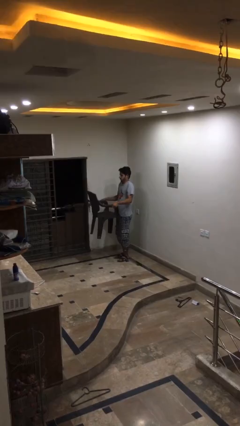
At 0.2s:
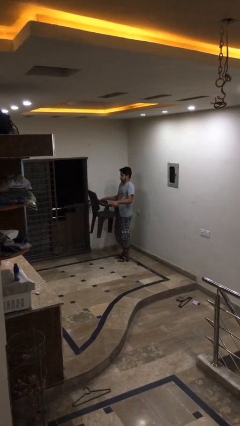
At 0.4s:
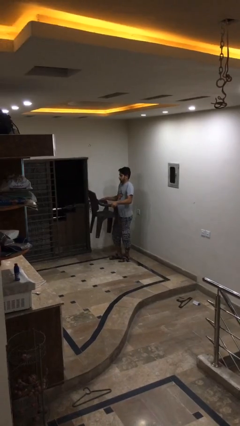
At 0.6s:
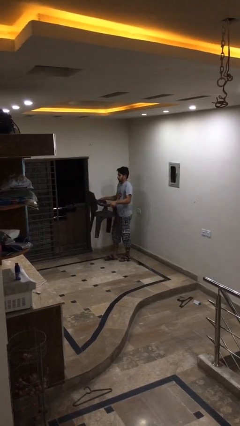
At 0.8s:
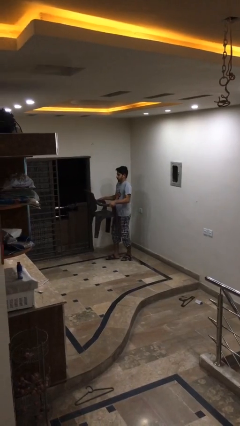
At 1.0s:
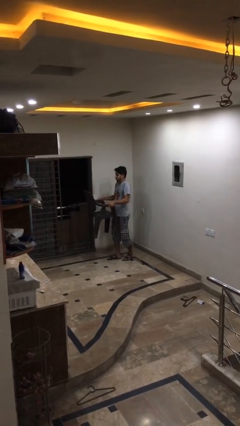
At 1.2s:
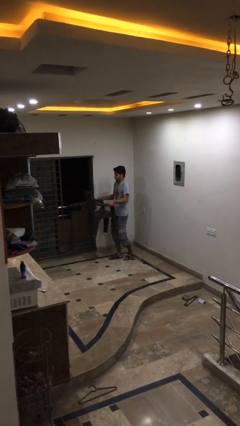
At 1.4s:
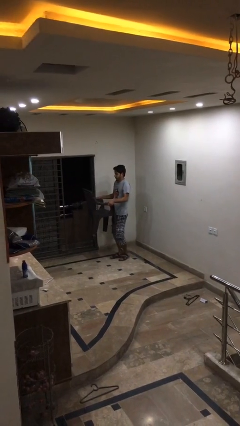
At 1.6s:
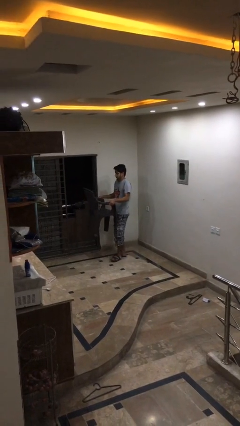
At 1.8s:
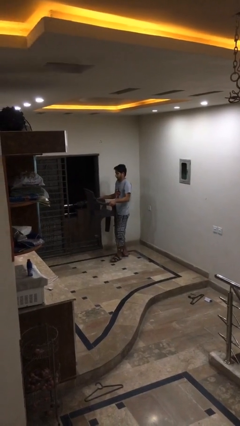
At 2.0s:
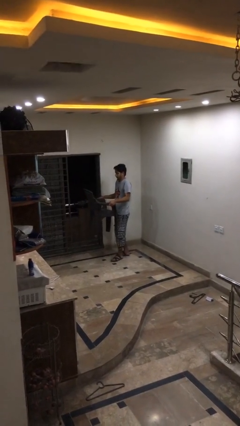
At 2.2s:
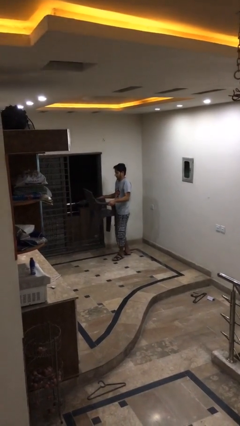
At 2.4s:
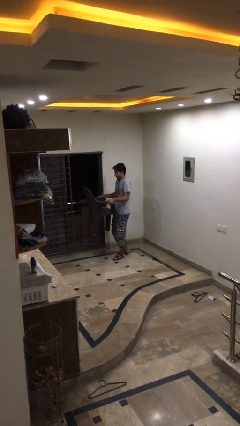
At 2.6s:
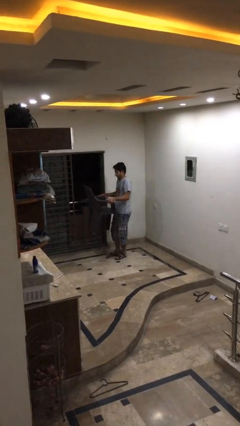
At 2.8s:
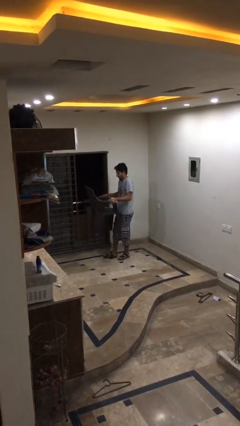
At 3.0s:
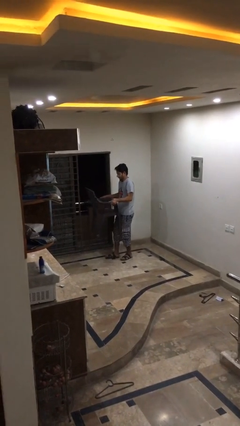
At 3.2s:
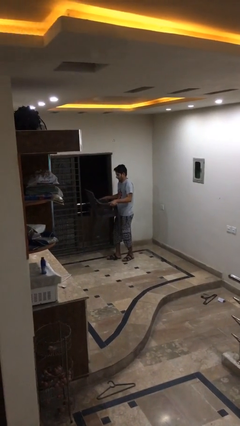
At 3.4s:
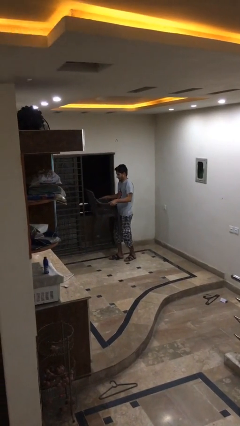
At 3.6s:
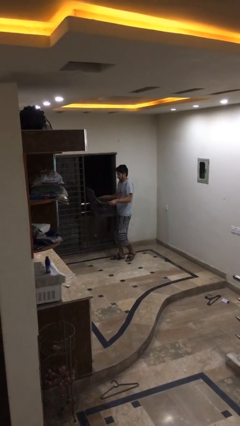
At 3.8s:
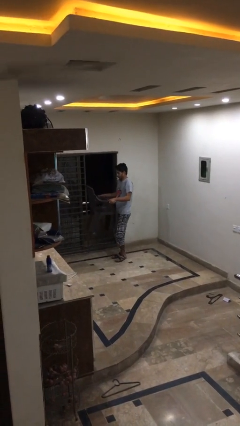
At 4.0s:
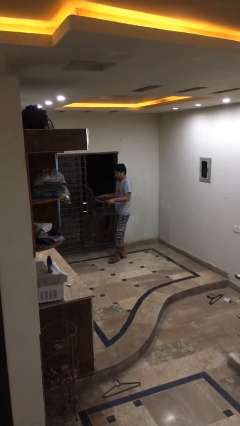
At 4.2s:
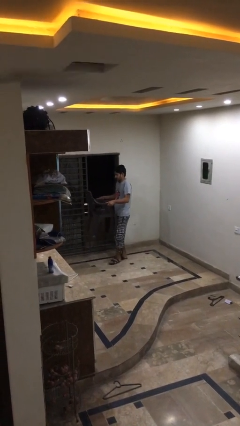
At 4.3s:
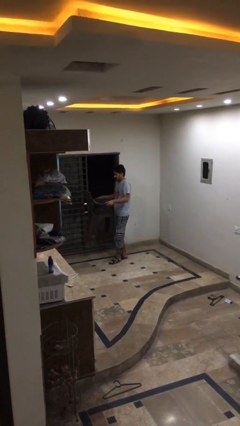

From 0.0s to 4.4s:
person carries heavy object

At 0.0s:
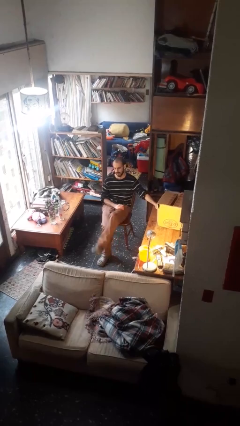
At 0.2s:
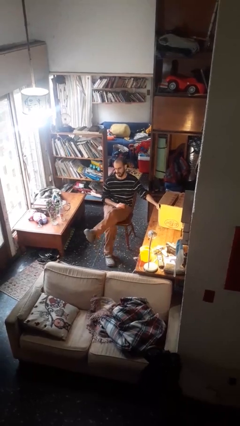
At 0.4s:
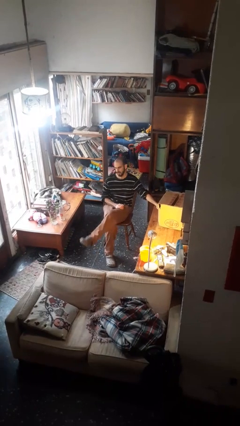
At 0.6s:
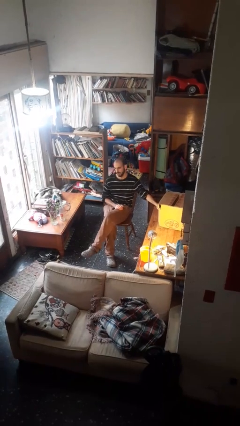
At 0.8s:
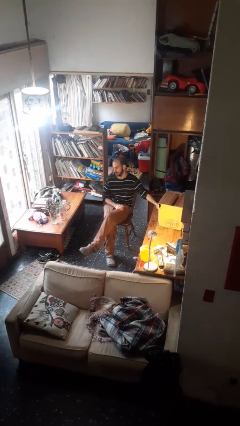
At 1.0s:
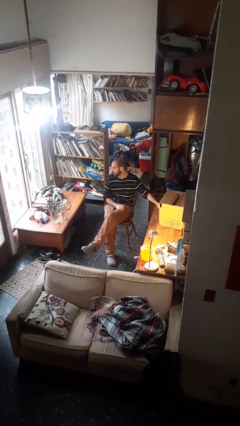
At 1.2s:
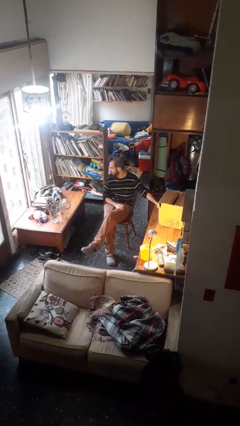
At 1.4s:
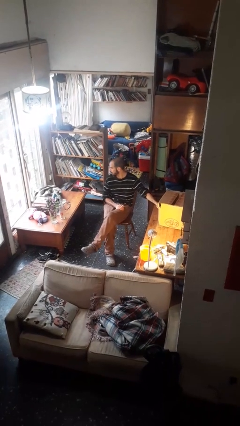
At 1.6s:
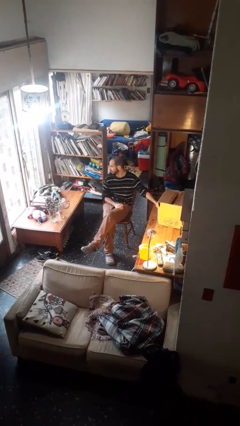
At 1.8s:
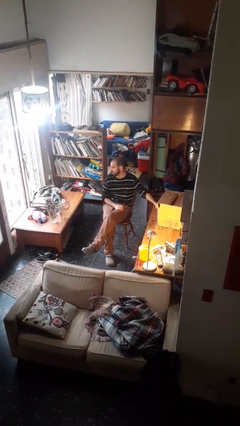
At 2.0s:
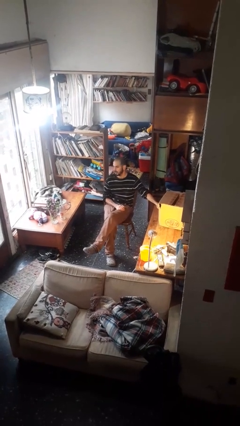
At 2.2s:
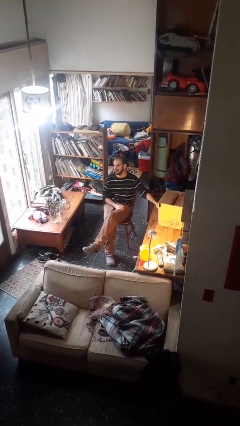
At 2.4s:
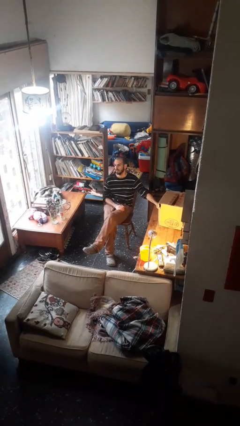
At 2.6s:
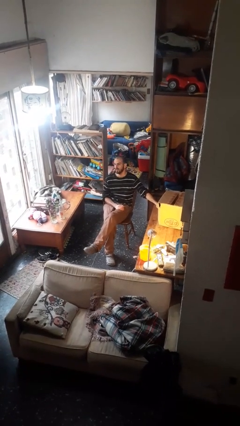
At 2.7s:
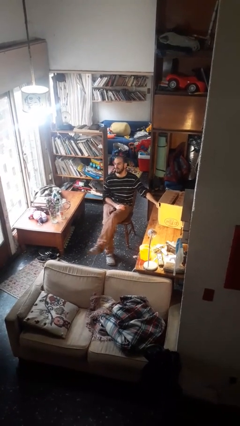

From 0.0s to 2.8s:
person crosses legs

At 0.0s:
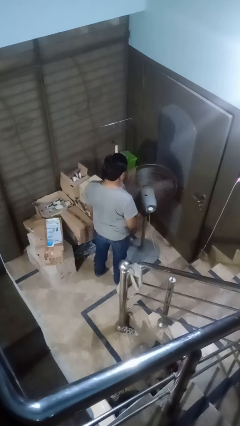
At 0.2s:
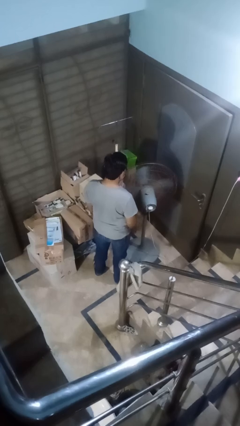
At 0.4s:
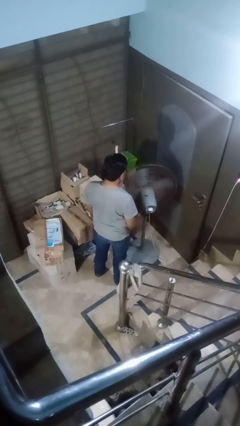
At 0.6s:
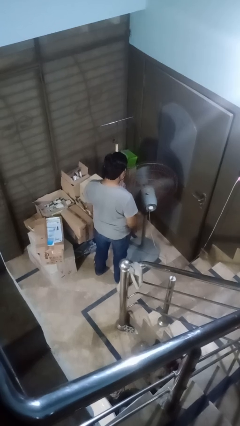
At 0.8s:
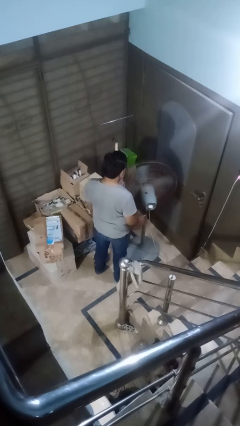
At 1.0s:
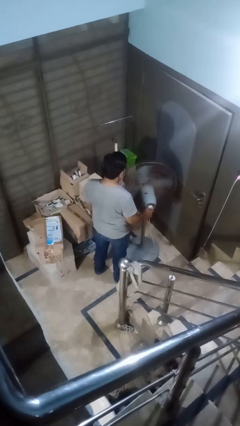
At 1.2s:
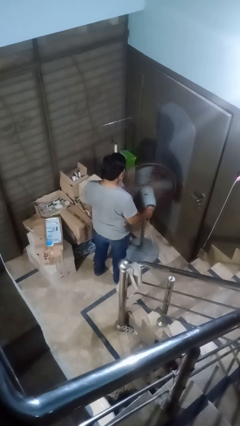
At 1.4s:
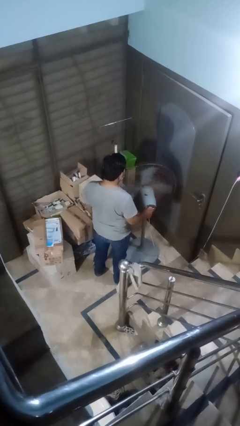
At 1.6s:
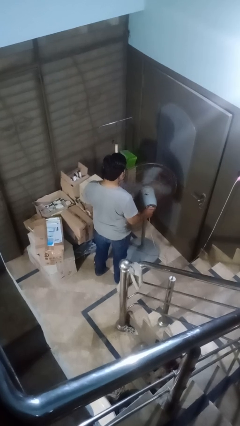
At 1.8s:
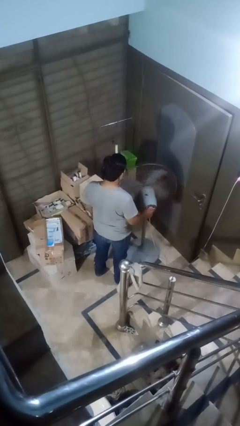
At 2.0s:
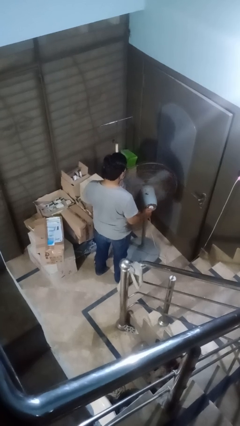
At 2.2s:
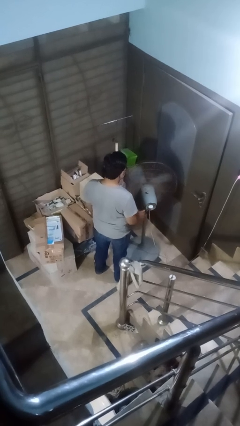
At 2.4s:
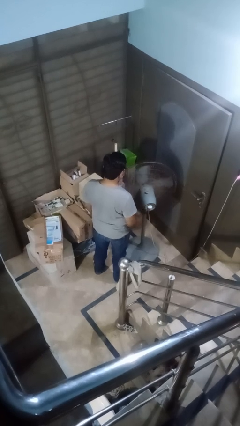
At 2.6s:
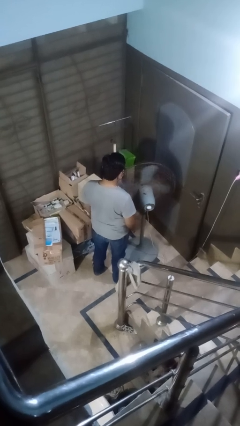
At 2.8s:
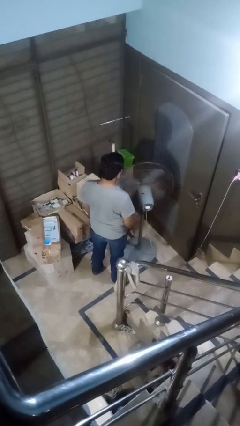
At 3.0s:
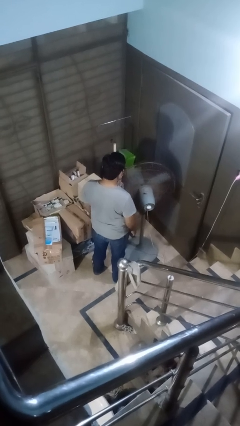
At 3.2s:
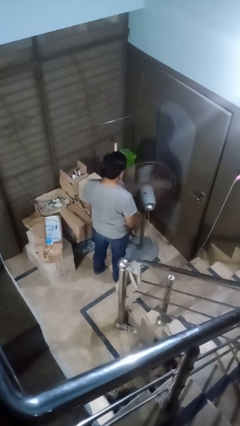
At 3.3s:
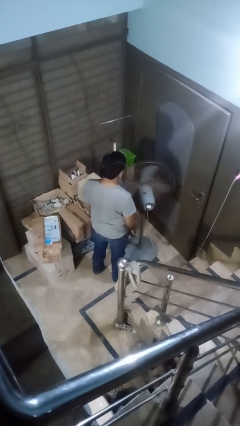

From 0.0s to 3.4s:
person turns off fan

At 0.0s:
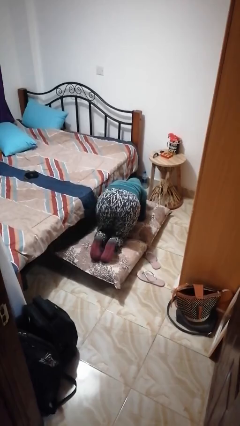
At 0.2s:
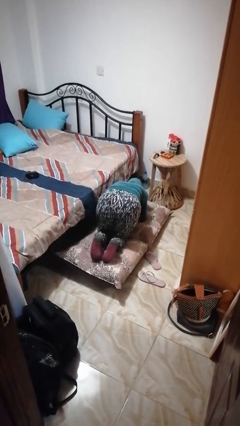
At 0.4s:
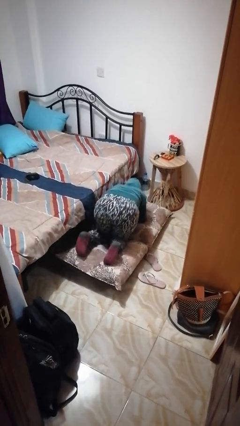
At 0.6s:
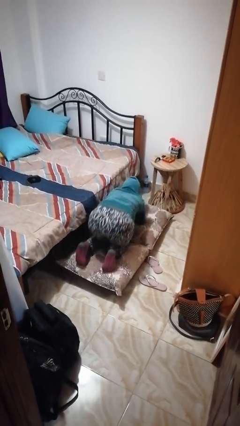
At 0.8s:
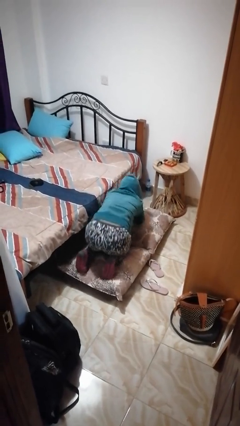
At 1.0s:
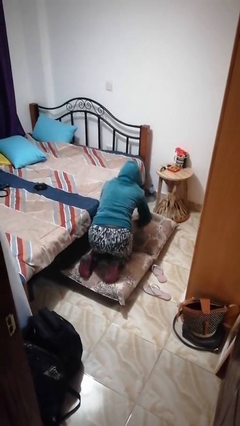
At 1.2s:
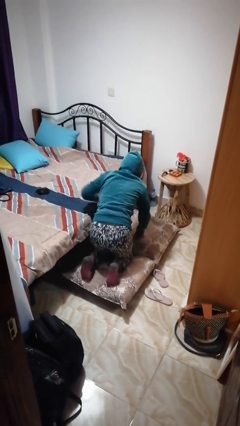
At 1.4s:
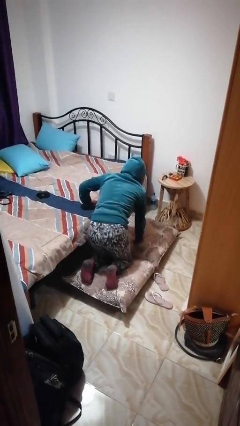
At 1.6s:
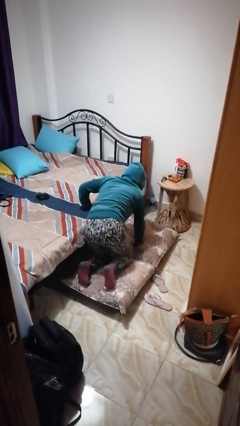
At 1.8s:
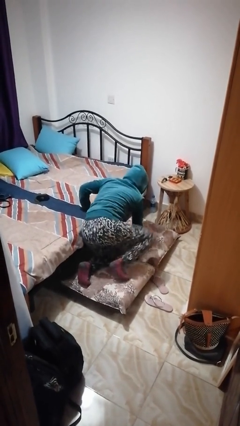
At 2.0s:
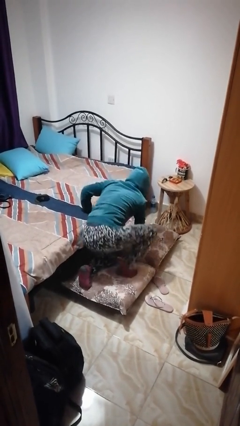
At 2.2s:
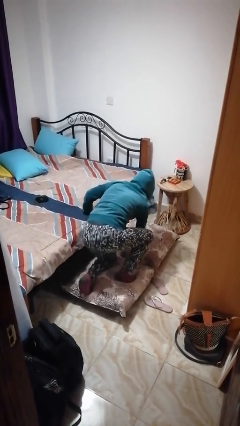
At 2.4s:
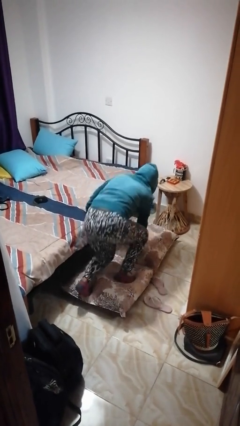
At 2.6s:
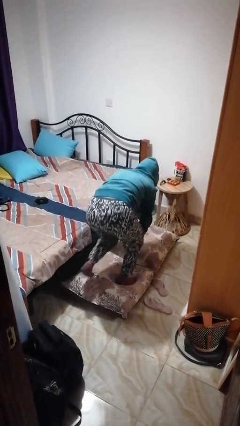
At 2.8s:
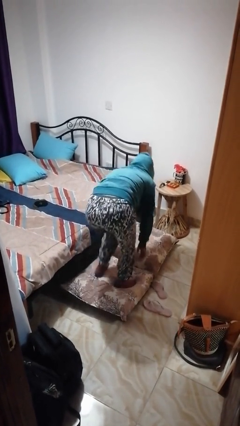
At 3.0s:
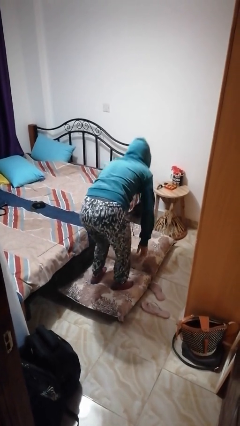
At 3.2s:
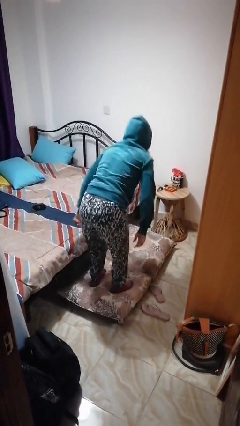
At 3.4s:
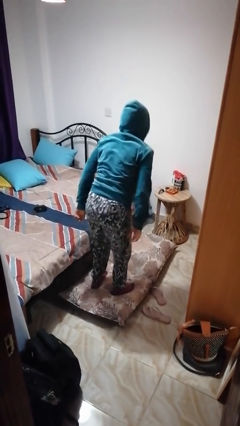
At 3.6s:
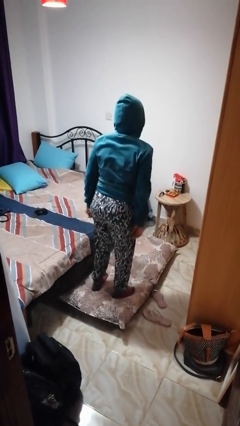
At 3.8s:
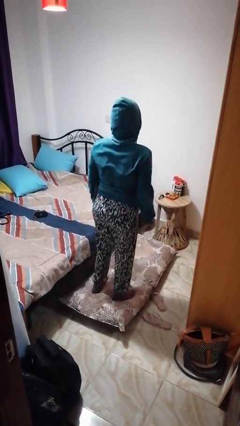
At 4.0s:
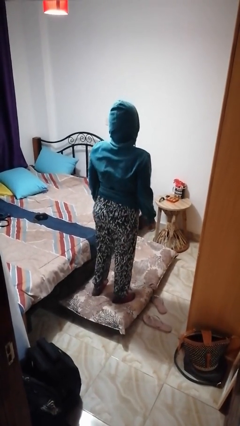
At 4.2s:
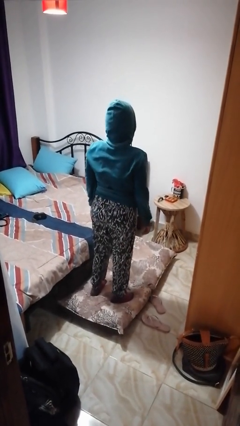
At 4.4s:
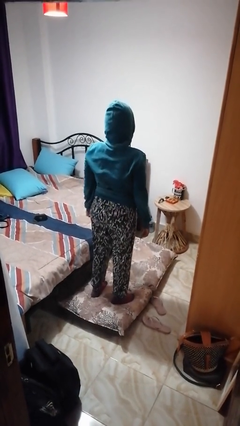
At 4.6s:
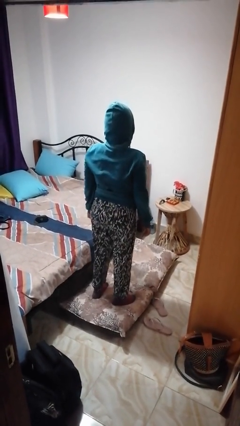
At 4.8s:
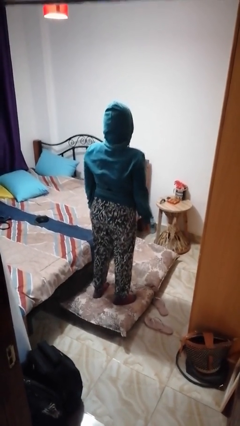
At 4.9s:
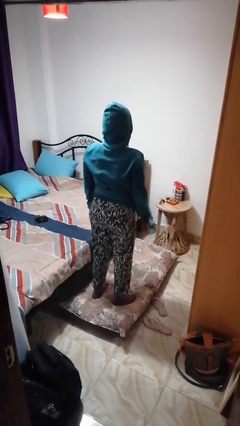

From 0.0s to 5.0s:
person stands up from floor

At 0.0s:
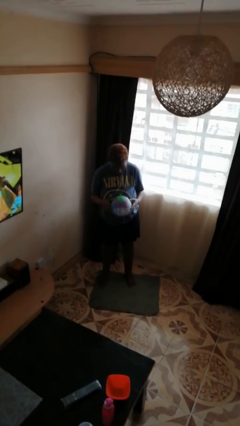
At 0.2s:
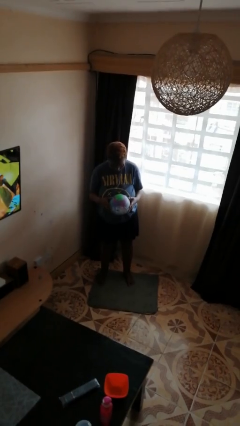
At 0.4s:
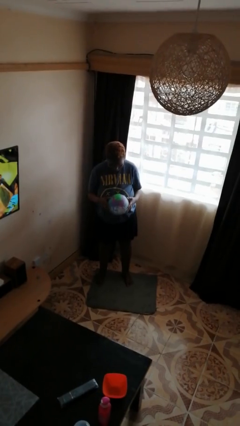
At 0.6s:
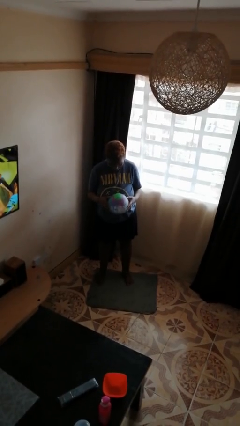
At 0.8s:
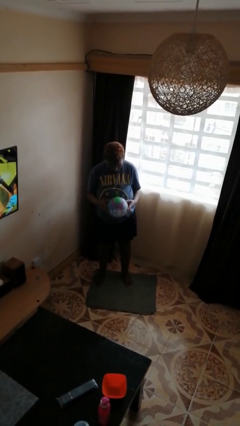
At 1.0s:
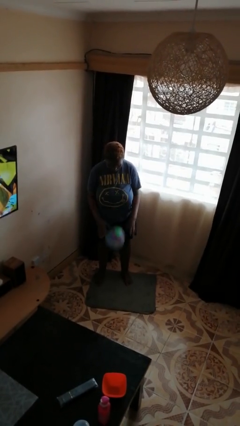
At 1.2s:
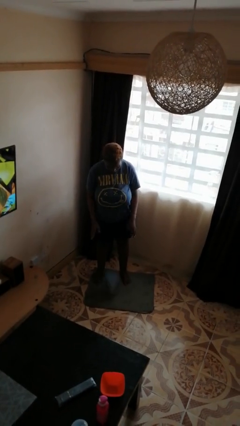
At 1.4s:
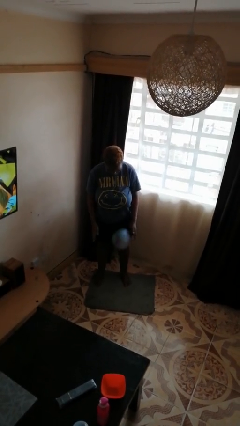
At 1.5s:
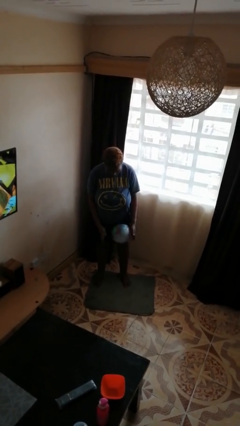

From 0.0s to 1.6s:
person bounces ball on floor

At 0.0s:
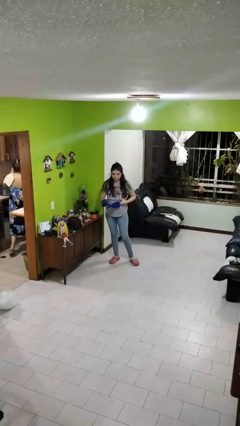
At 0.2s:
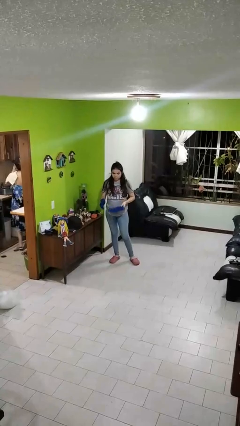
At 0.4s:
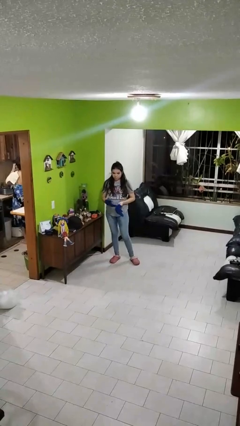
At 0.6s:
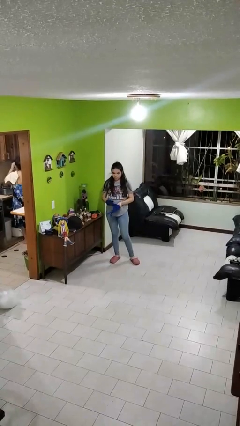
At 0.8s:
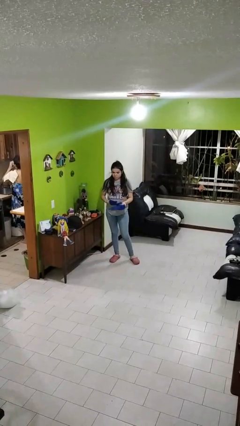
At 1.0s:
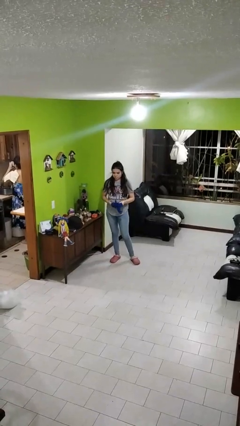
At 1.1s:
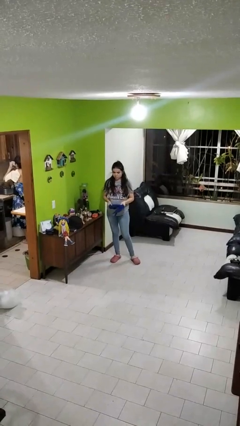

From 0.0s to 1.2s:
person takes off gloves
